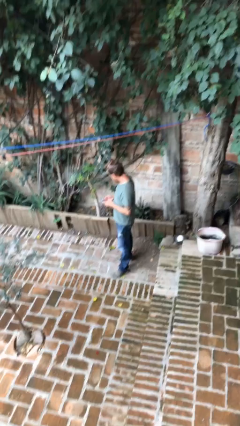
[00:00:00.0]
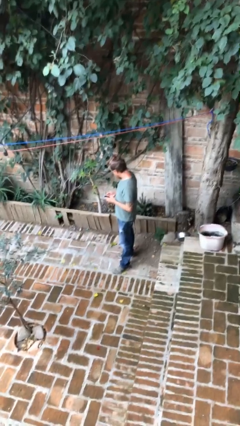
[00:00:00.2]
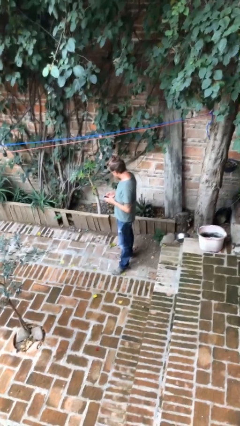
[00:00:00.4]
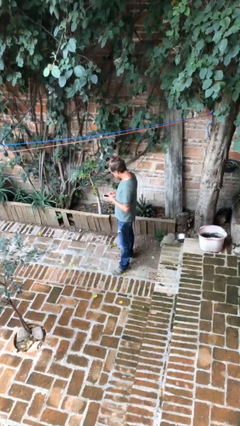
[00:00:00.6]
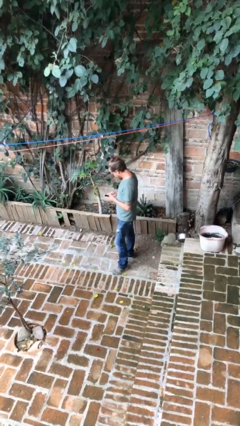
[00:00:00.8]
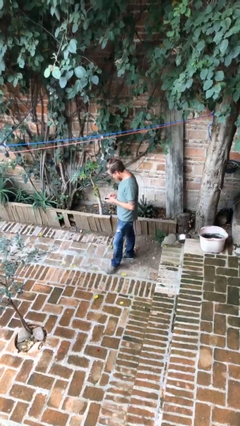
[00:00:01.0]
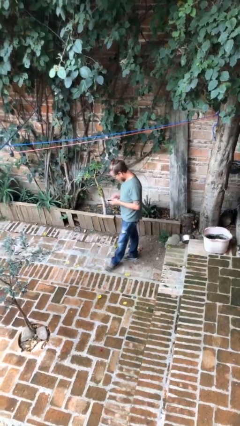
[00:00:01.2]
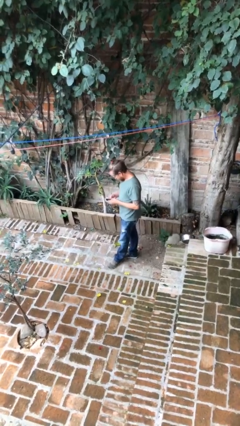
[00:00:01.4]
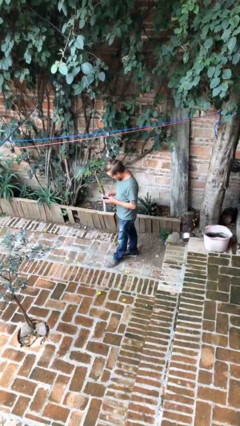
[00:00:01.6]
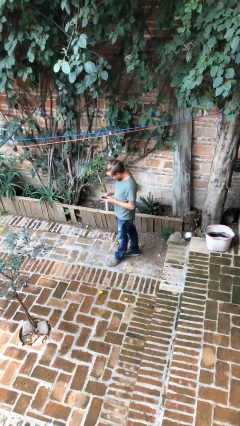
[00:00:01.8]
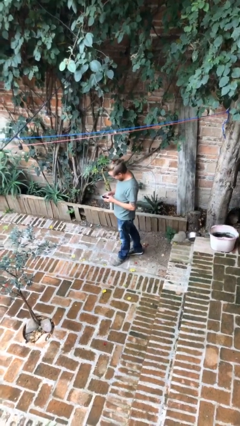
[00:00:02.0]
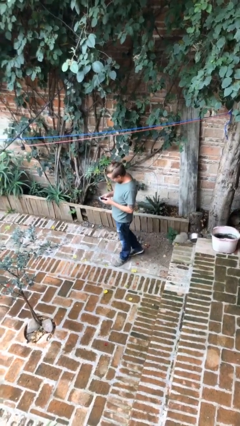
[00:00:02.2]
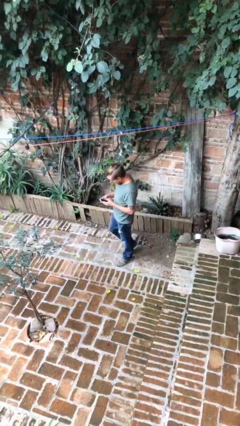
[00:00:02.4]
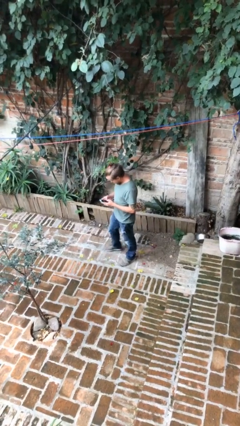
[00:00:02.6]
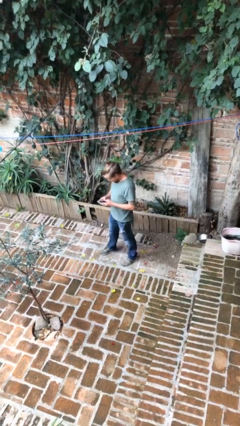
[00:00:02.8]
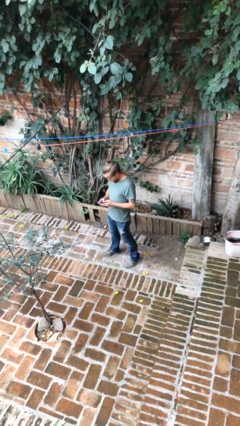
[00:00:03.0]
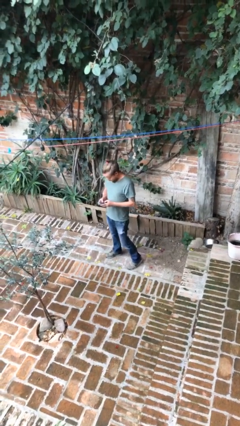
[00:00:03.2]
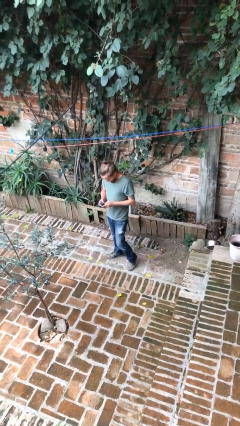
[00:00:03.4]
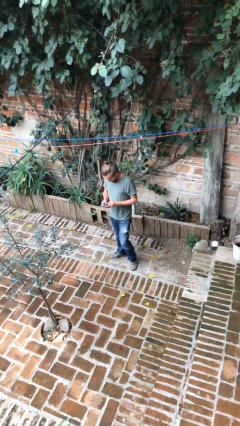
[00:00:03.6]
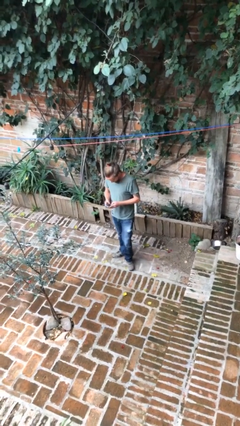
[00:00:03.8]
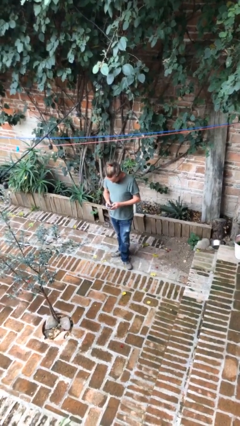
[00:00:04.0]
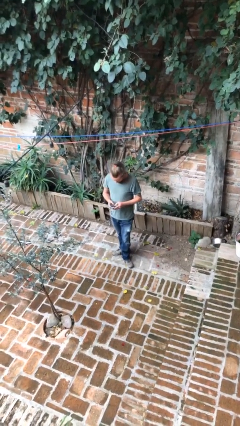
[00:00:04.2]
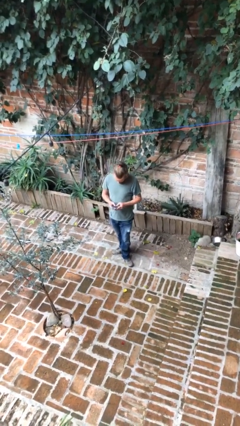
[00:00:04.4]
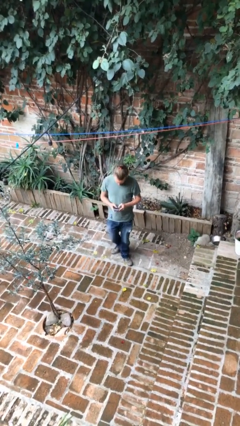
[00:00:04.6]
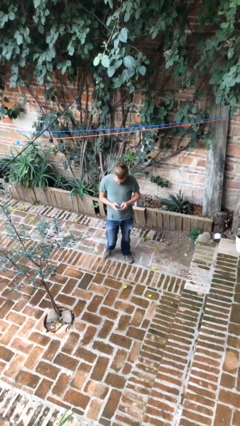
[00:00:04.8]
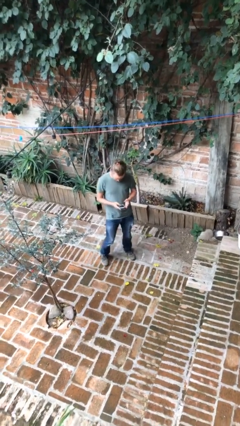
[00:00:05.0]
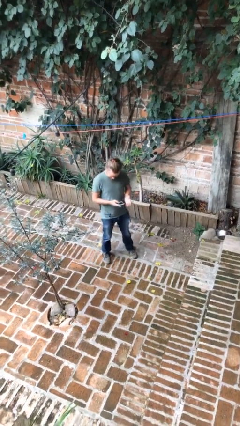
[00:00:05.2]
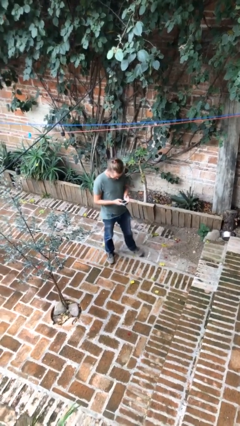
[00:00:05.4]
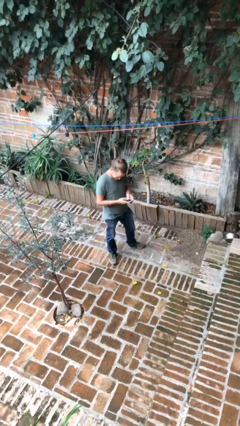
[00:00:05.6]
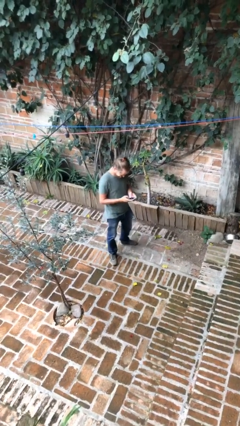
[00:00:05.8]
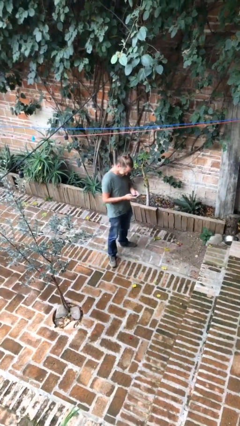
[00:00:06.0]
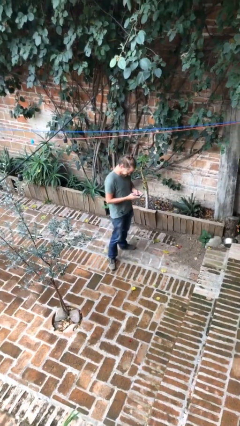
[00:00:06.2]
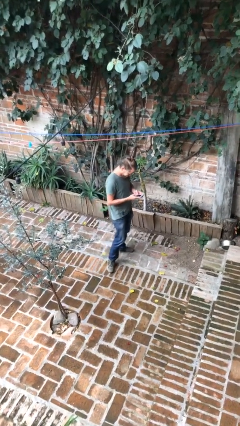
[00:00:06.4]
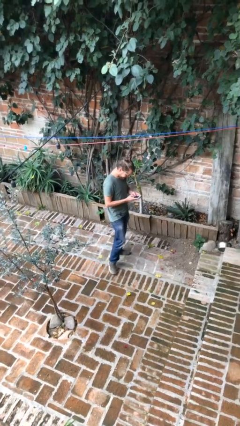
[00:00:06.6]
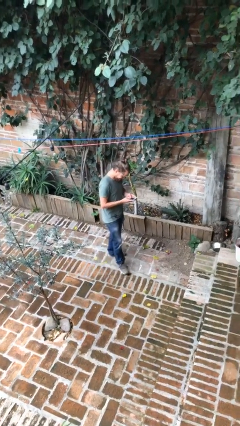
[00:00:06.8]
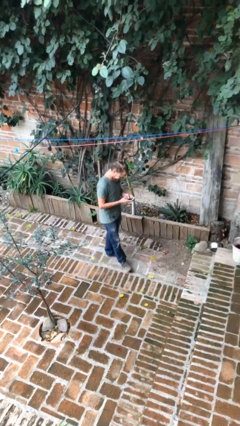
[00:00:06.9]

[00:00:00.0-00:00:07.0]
person texts on phone

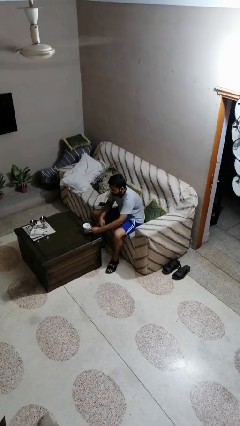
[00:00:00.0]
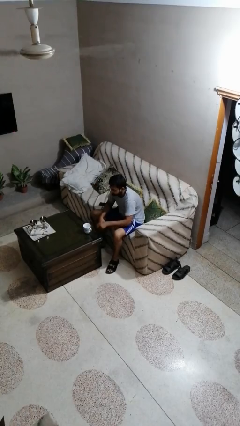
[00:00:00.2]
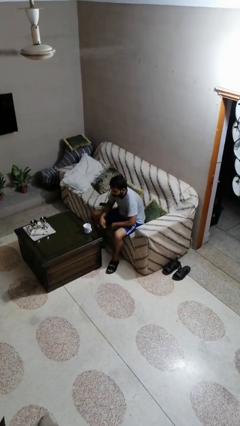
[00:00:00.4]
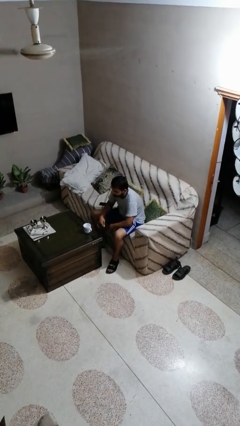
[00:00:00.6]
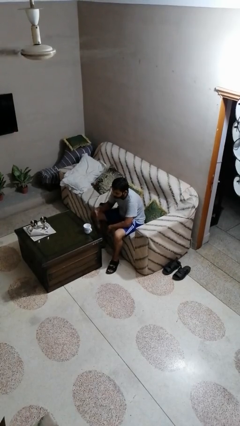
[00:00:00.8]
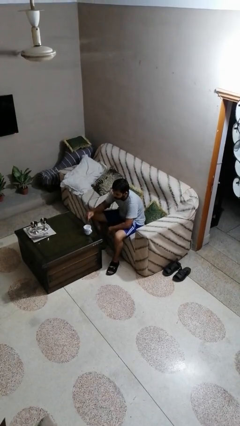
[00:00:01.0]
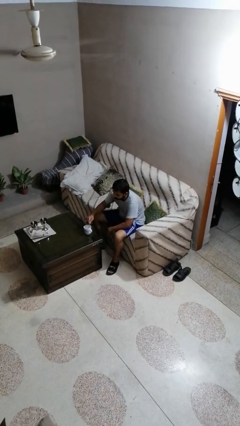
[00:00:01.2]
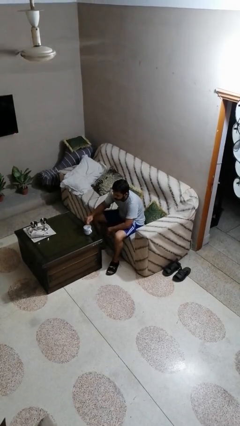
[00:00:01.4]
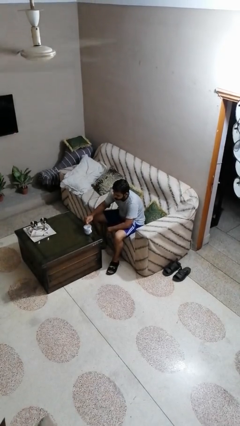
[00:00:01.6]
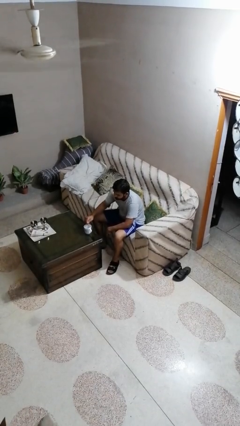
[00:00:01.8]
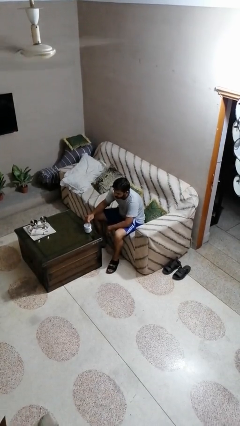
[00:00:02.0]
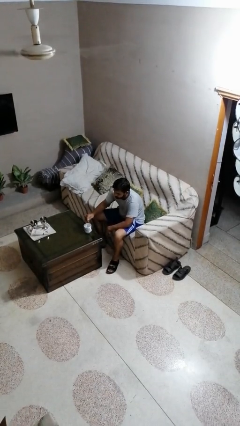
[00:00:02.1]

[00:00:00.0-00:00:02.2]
person stirs mug

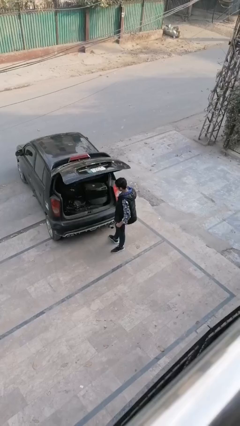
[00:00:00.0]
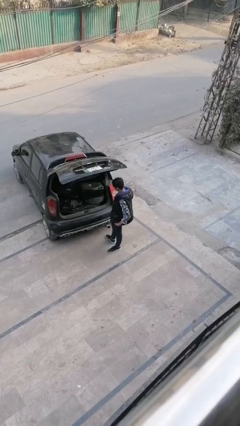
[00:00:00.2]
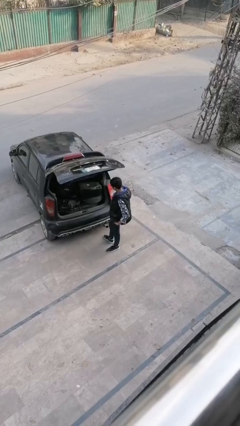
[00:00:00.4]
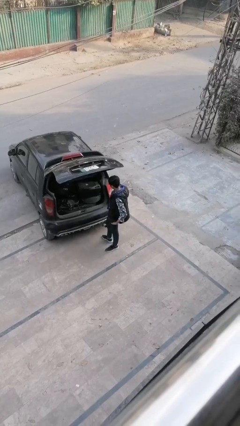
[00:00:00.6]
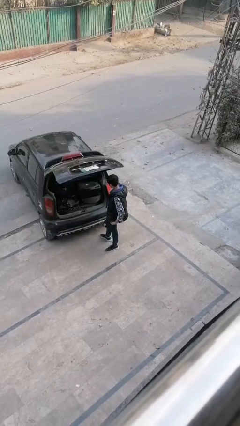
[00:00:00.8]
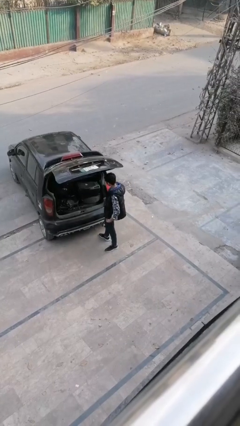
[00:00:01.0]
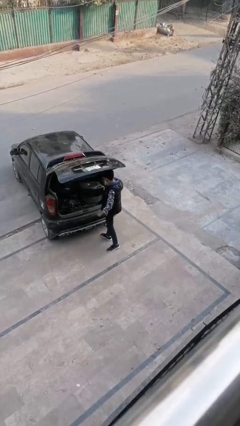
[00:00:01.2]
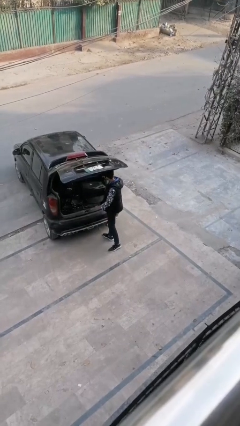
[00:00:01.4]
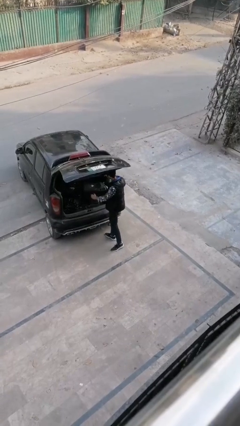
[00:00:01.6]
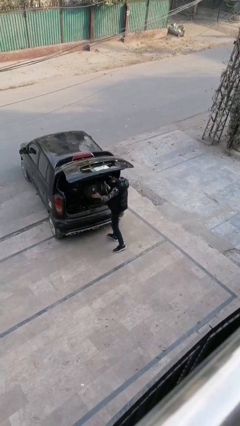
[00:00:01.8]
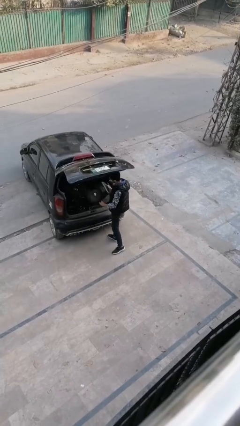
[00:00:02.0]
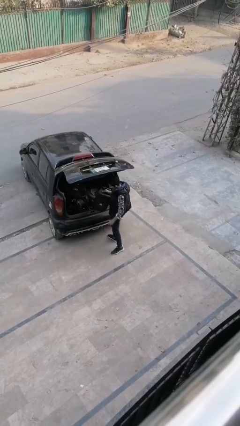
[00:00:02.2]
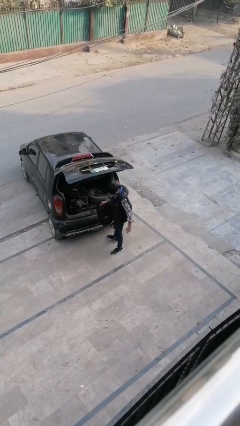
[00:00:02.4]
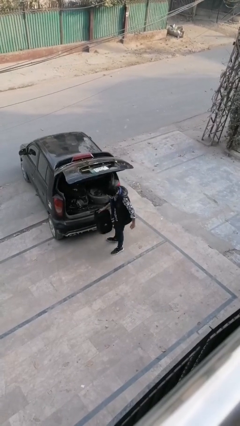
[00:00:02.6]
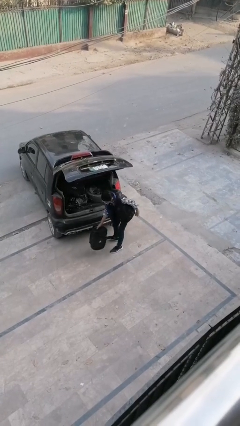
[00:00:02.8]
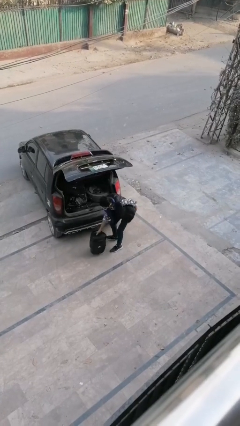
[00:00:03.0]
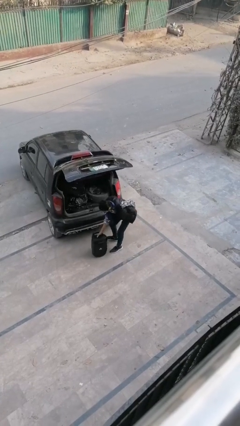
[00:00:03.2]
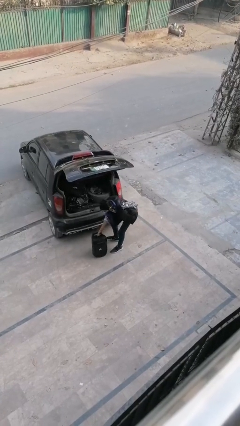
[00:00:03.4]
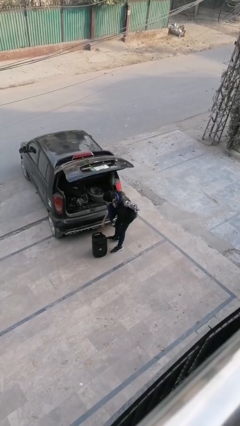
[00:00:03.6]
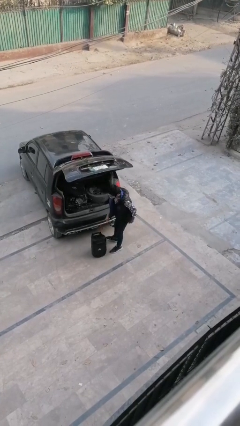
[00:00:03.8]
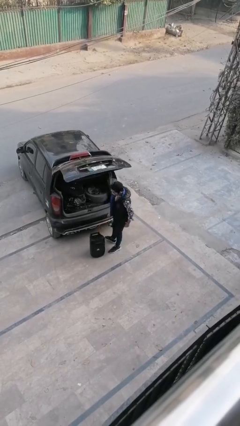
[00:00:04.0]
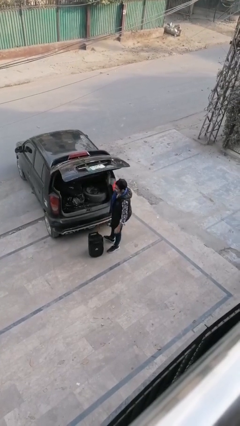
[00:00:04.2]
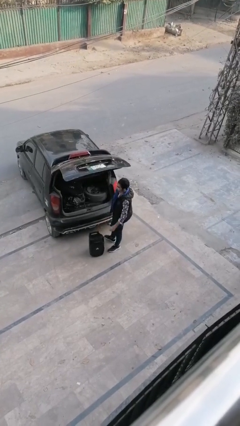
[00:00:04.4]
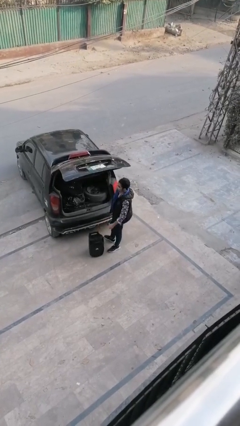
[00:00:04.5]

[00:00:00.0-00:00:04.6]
person unloads car

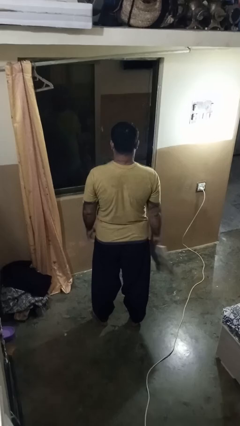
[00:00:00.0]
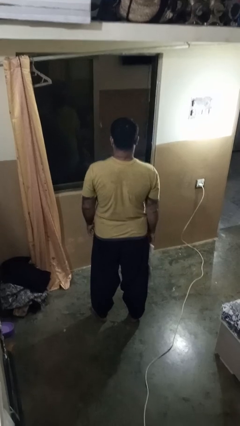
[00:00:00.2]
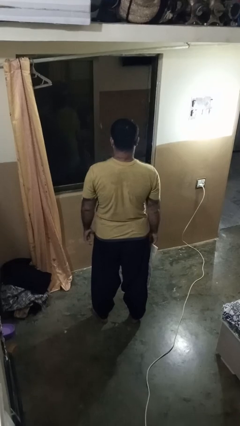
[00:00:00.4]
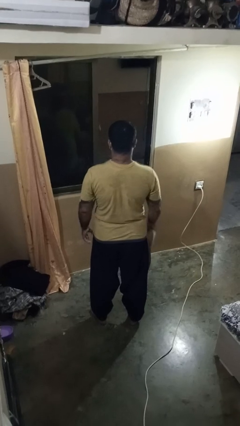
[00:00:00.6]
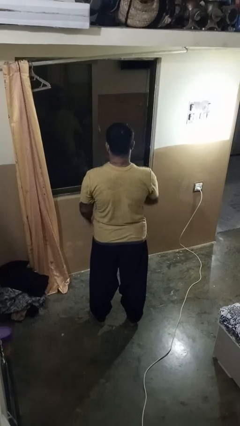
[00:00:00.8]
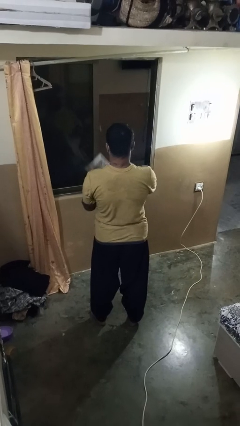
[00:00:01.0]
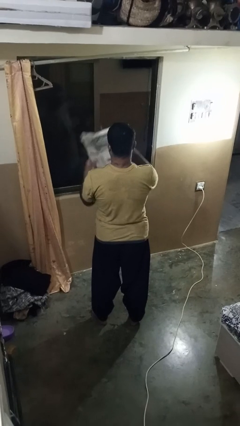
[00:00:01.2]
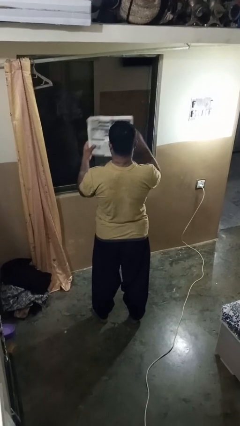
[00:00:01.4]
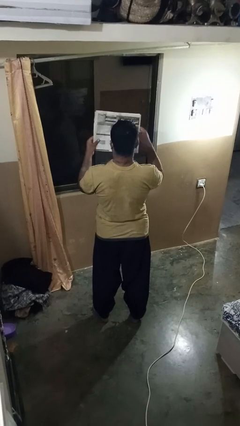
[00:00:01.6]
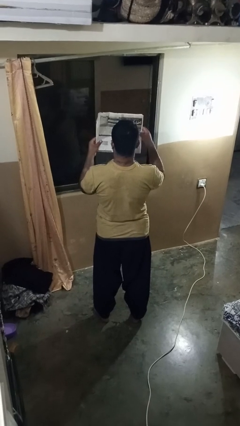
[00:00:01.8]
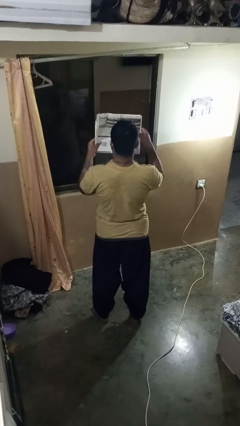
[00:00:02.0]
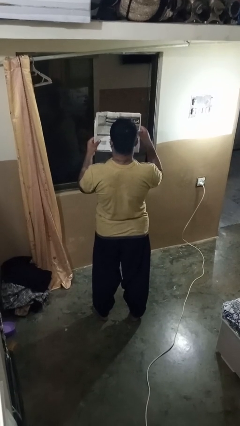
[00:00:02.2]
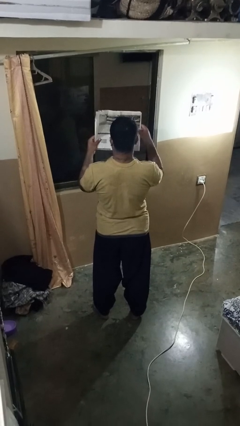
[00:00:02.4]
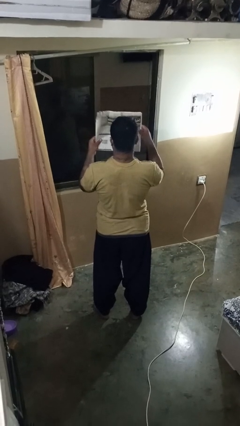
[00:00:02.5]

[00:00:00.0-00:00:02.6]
person reads newspaper

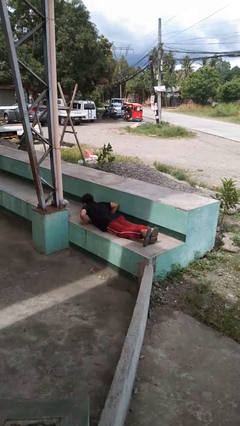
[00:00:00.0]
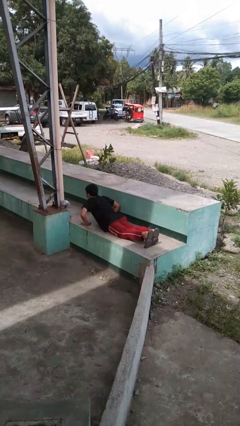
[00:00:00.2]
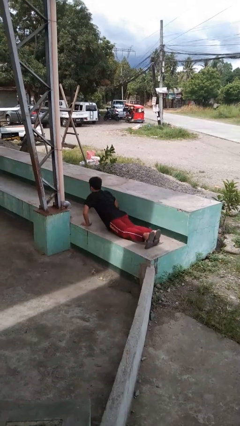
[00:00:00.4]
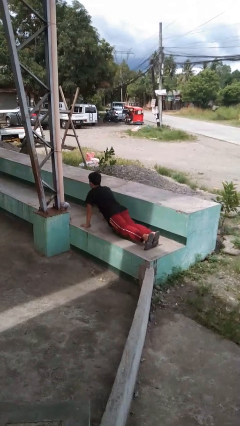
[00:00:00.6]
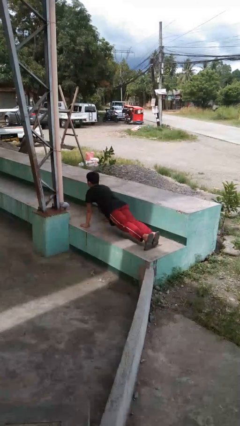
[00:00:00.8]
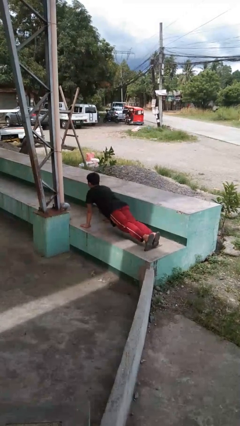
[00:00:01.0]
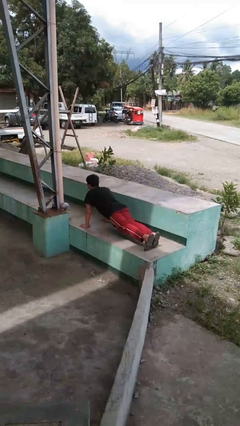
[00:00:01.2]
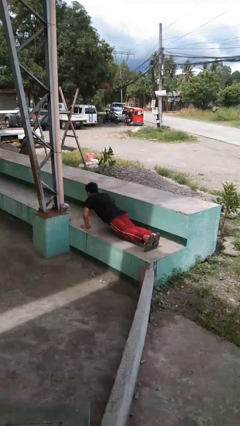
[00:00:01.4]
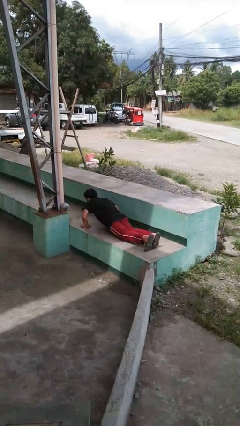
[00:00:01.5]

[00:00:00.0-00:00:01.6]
person exercises with pushup
